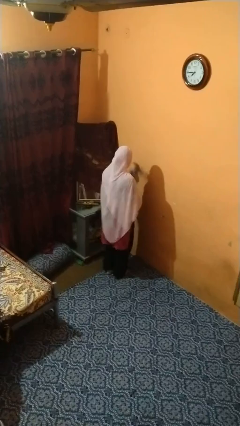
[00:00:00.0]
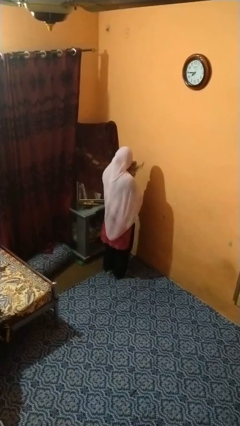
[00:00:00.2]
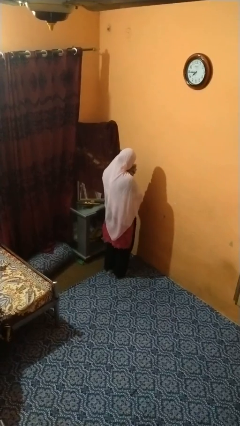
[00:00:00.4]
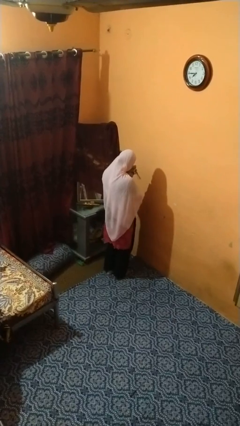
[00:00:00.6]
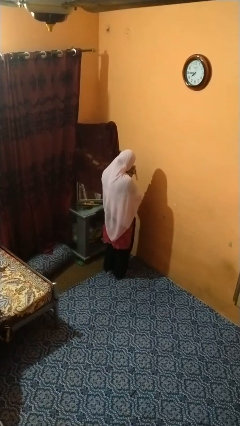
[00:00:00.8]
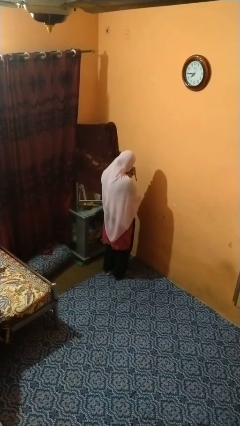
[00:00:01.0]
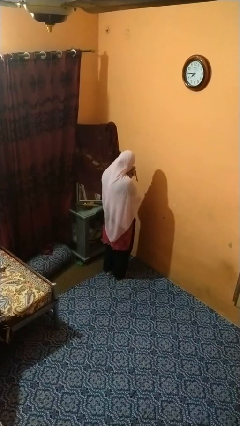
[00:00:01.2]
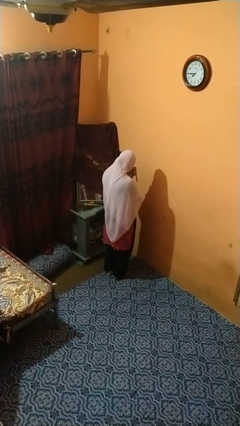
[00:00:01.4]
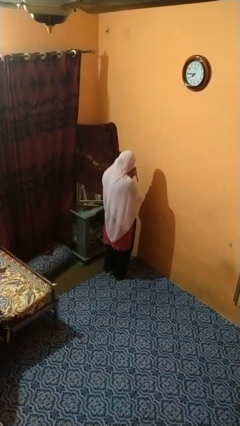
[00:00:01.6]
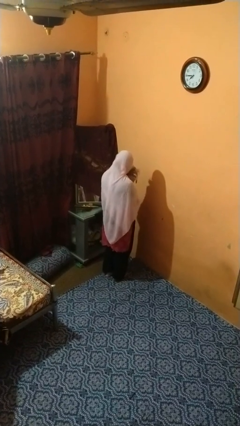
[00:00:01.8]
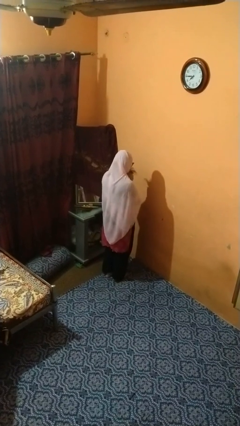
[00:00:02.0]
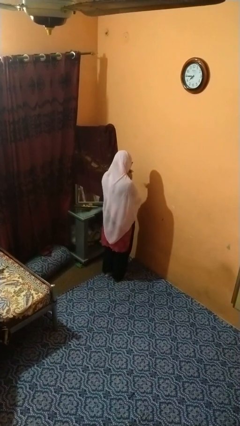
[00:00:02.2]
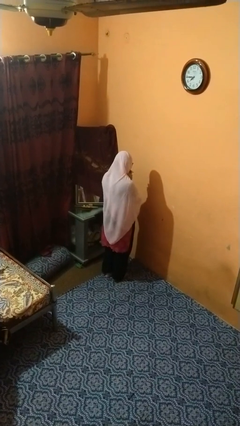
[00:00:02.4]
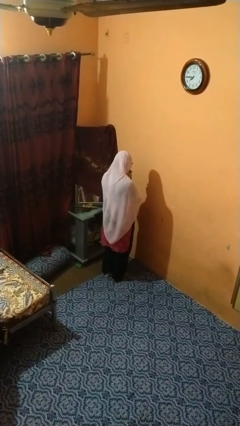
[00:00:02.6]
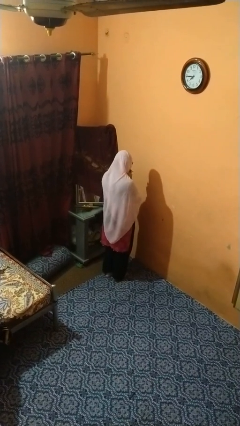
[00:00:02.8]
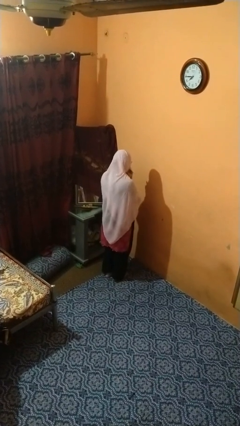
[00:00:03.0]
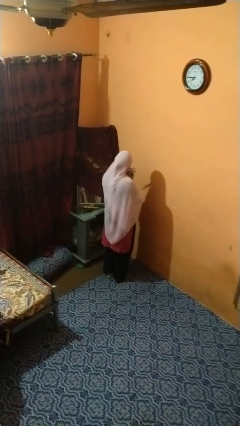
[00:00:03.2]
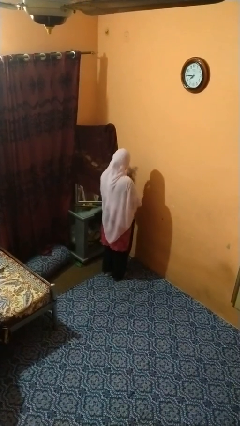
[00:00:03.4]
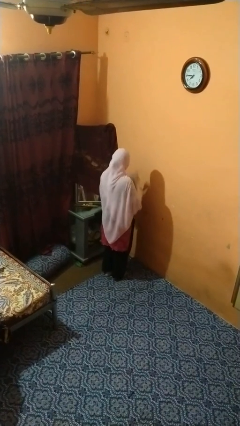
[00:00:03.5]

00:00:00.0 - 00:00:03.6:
person hugs stuffed animal

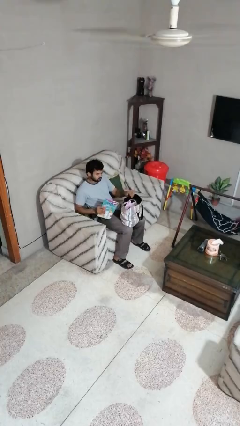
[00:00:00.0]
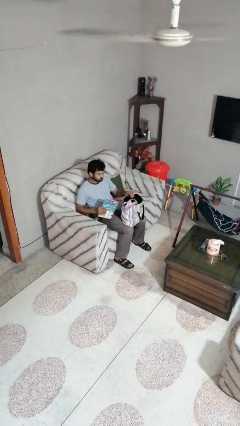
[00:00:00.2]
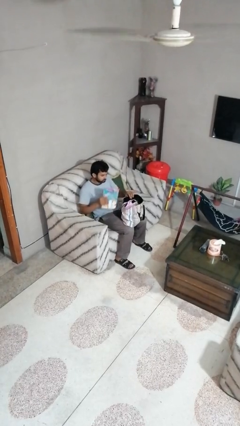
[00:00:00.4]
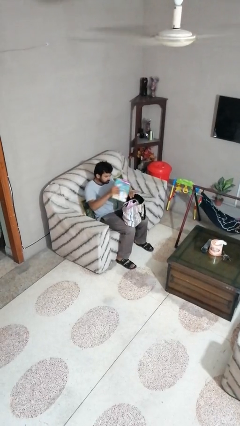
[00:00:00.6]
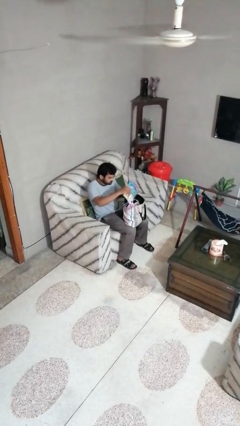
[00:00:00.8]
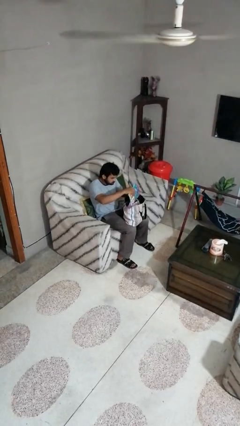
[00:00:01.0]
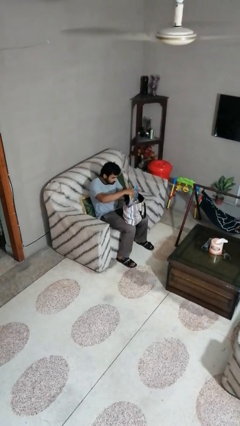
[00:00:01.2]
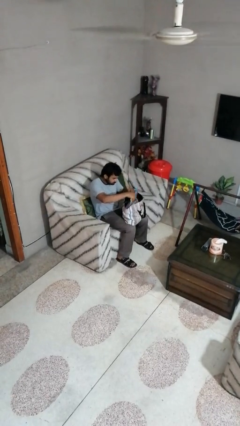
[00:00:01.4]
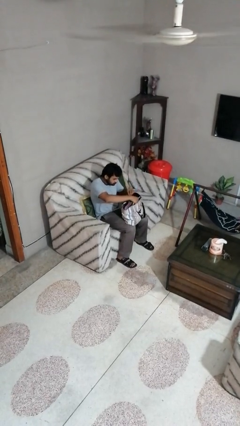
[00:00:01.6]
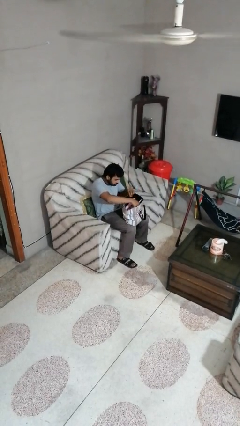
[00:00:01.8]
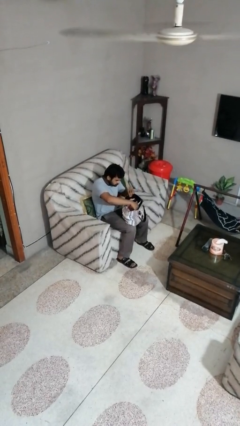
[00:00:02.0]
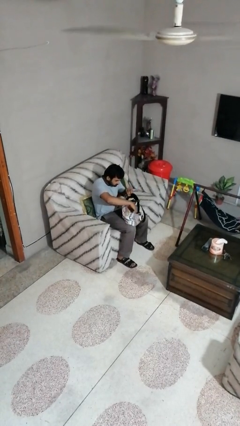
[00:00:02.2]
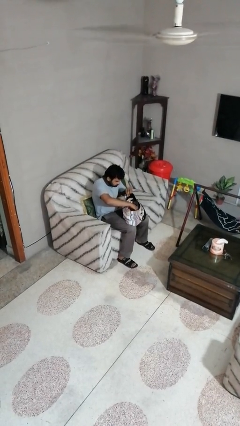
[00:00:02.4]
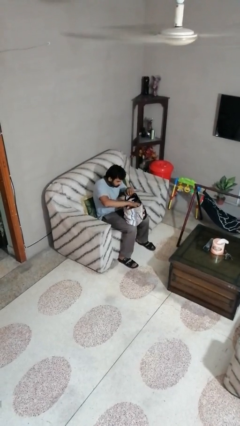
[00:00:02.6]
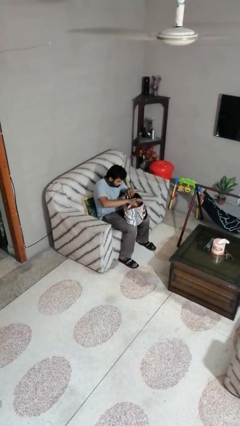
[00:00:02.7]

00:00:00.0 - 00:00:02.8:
person puts object into backpack

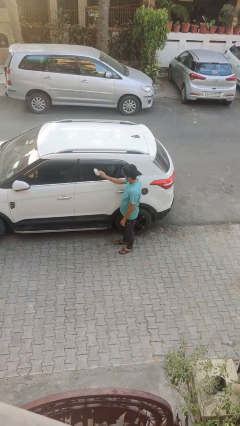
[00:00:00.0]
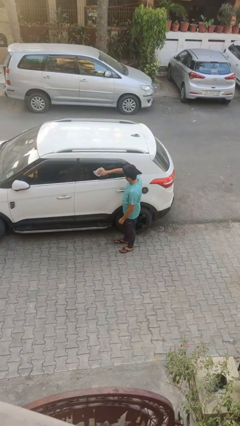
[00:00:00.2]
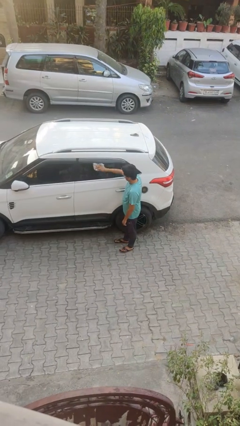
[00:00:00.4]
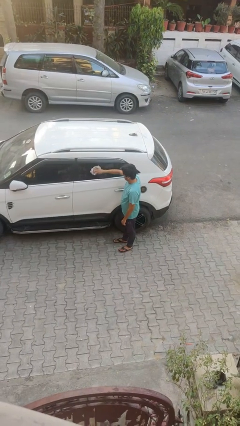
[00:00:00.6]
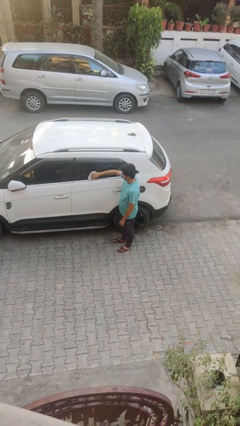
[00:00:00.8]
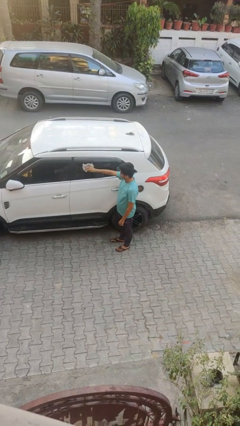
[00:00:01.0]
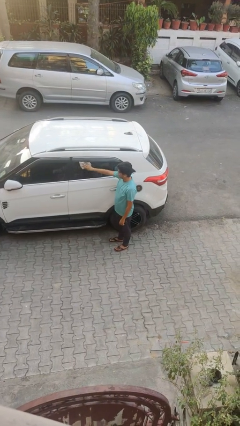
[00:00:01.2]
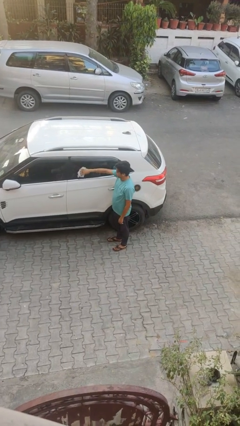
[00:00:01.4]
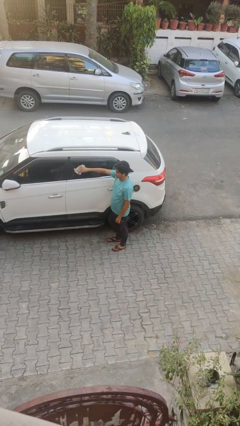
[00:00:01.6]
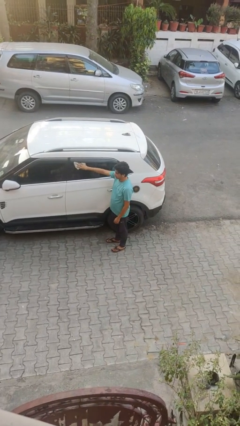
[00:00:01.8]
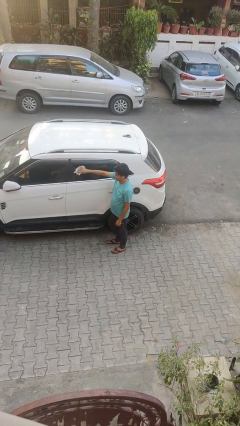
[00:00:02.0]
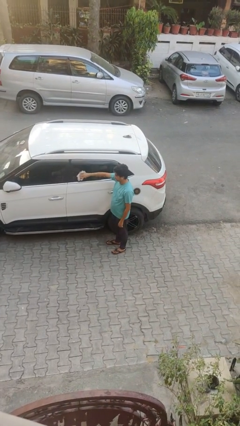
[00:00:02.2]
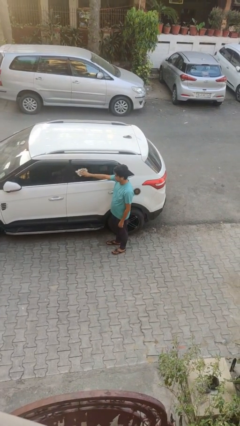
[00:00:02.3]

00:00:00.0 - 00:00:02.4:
person polishes car with rag

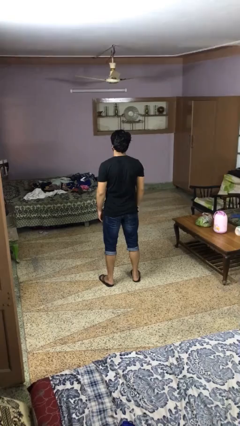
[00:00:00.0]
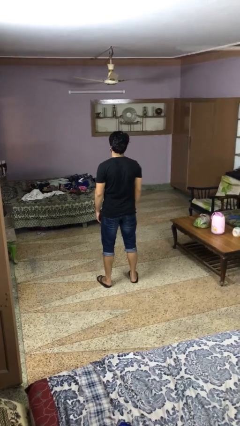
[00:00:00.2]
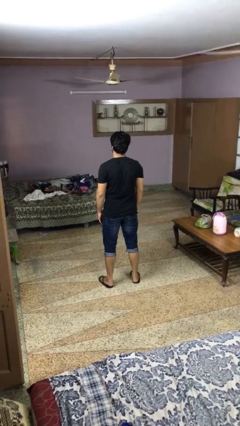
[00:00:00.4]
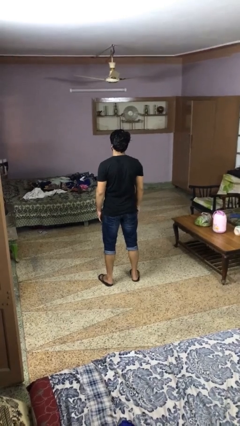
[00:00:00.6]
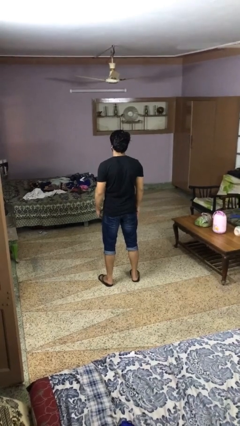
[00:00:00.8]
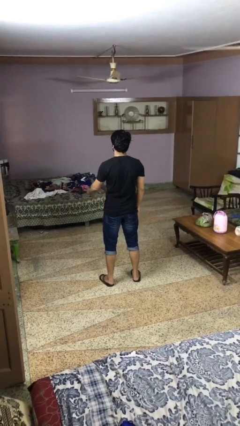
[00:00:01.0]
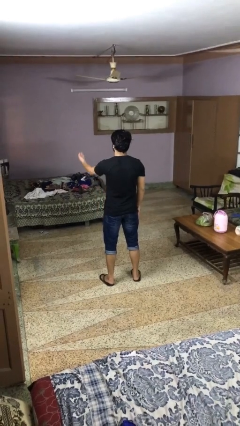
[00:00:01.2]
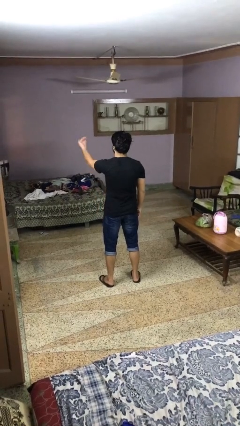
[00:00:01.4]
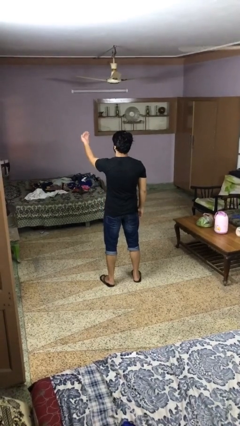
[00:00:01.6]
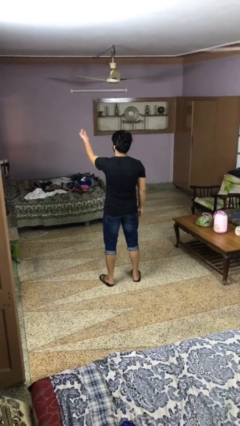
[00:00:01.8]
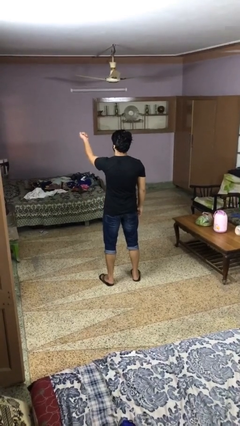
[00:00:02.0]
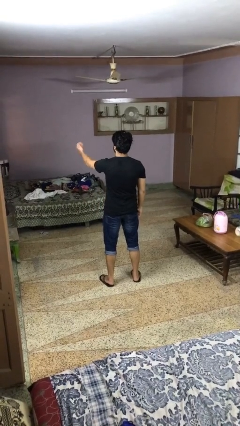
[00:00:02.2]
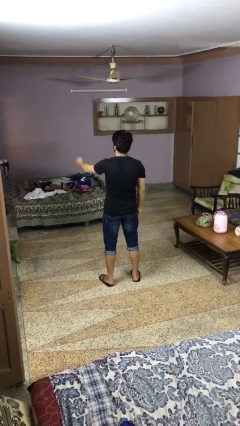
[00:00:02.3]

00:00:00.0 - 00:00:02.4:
person gestures come here

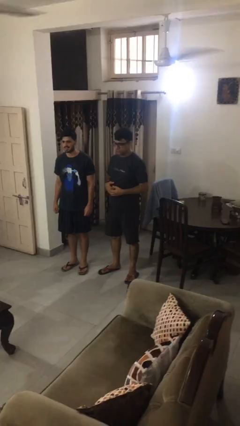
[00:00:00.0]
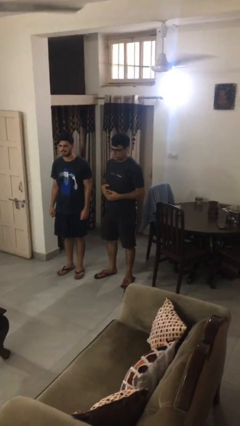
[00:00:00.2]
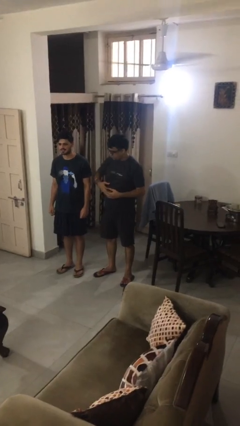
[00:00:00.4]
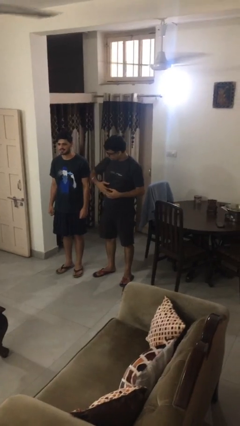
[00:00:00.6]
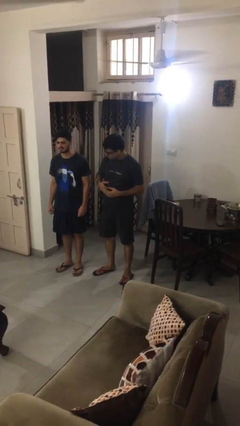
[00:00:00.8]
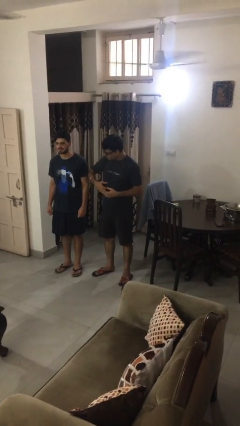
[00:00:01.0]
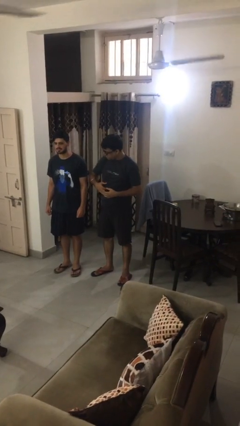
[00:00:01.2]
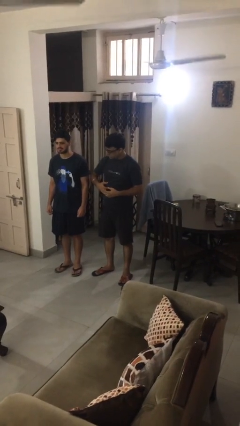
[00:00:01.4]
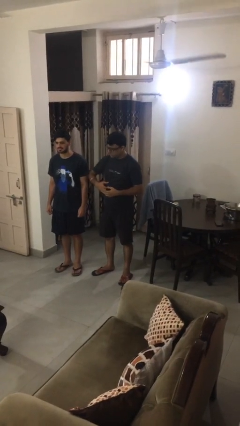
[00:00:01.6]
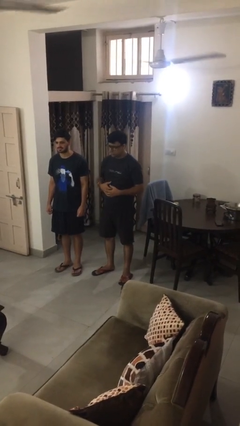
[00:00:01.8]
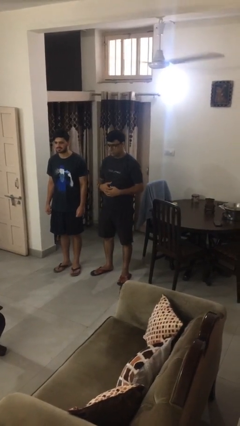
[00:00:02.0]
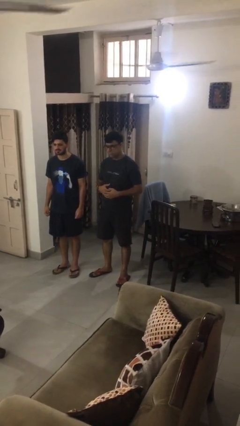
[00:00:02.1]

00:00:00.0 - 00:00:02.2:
person nudges person with elbow

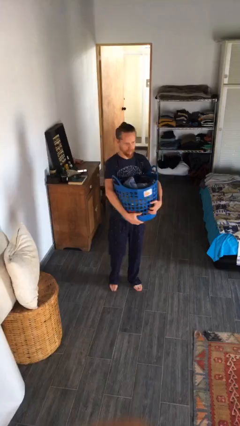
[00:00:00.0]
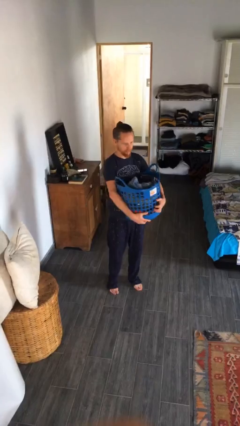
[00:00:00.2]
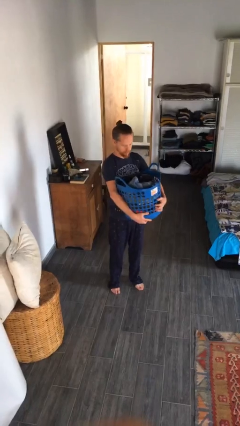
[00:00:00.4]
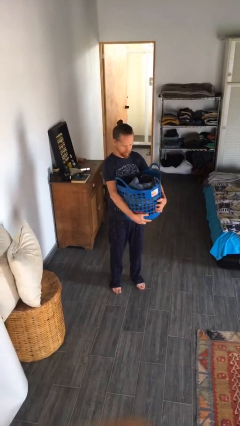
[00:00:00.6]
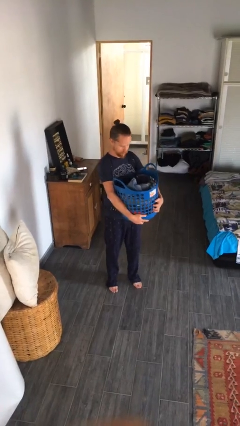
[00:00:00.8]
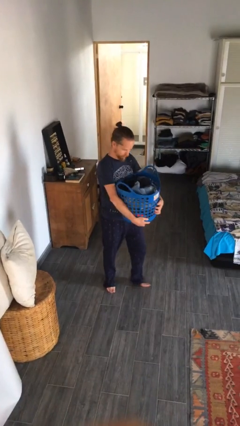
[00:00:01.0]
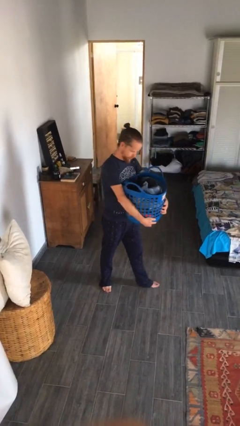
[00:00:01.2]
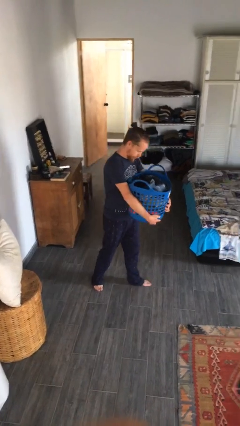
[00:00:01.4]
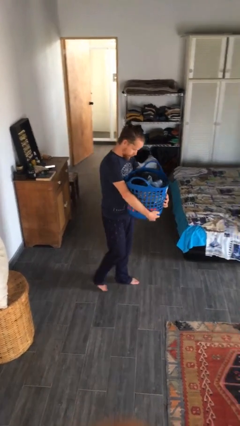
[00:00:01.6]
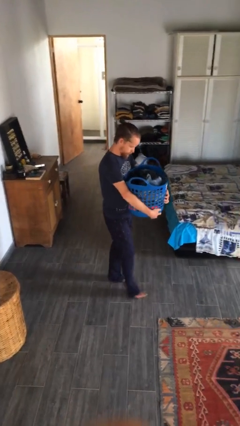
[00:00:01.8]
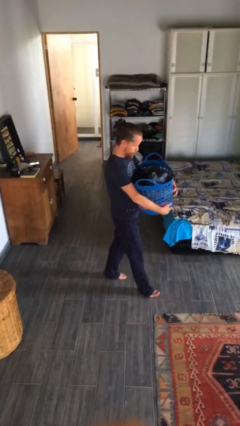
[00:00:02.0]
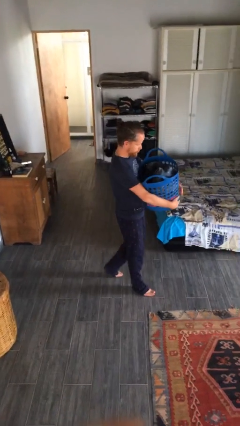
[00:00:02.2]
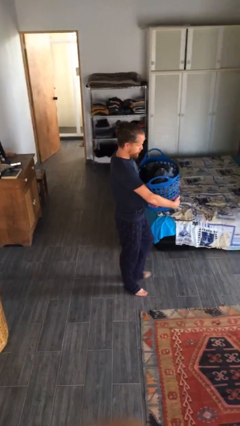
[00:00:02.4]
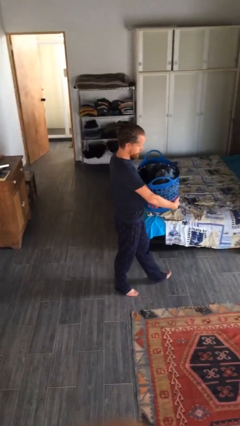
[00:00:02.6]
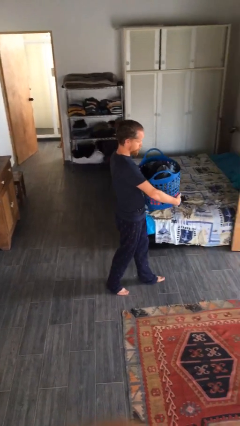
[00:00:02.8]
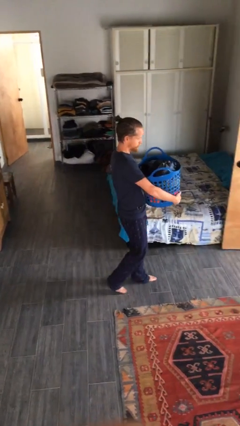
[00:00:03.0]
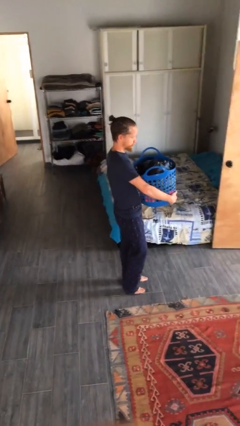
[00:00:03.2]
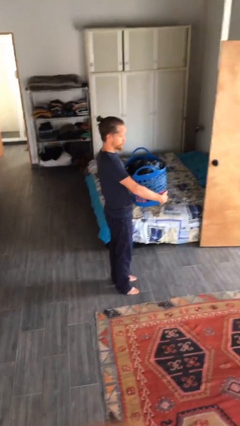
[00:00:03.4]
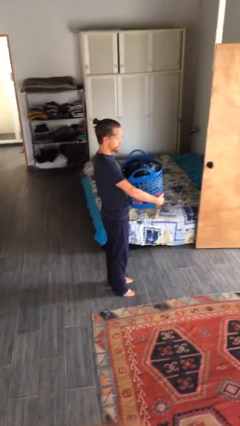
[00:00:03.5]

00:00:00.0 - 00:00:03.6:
person carries laundry basket
